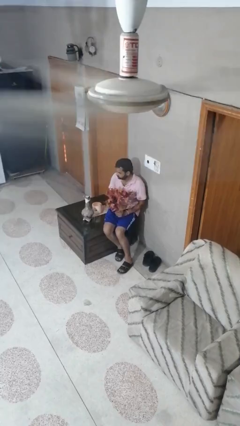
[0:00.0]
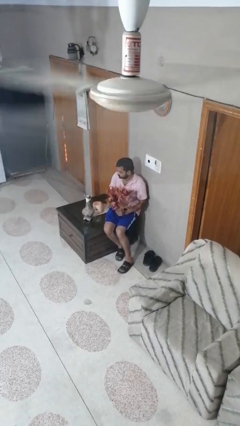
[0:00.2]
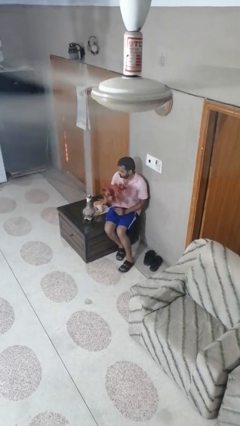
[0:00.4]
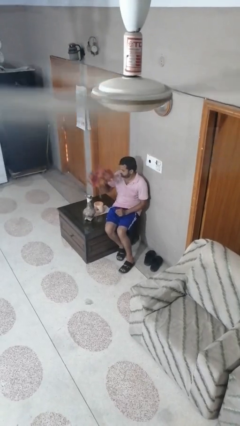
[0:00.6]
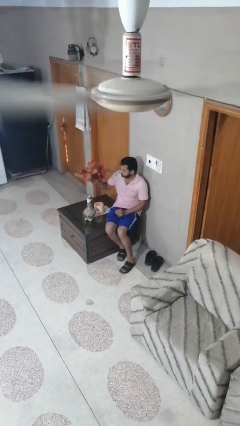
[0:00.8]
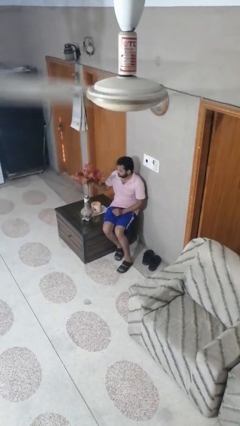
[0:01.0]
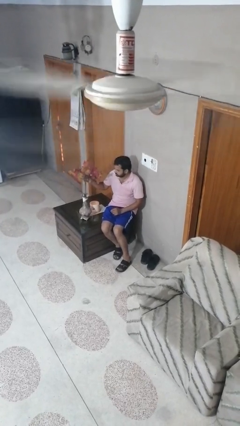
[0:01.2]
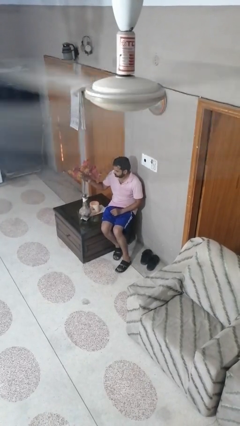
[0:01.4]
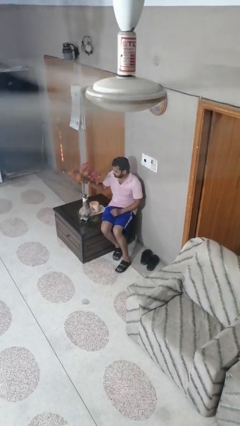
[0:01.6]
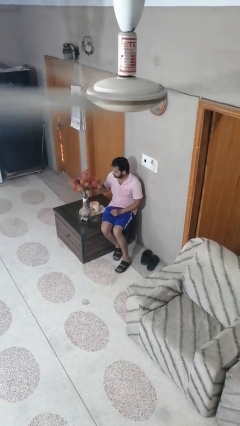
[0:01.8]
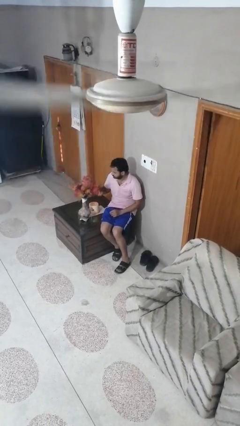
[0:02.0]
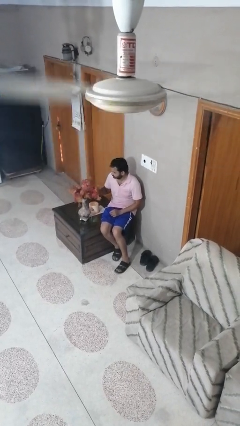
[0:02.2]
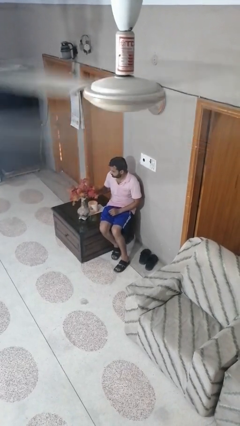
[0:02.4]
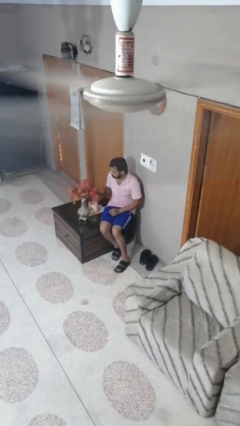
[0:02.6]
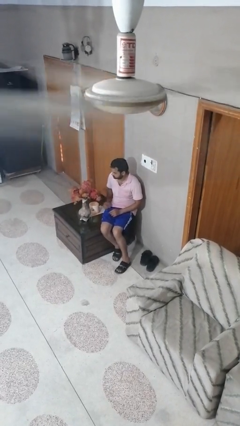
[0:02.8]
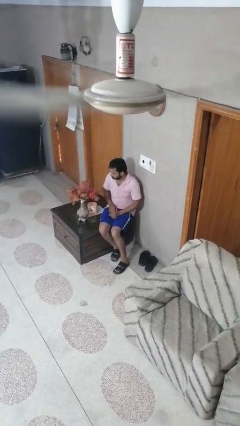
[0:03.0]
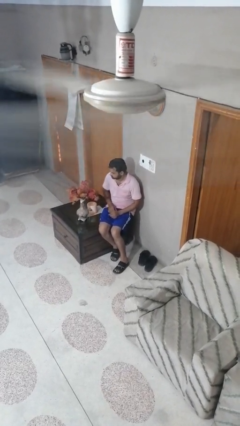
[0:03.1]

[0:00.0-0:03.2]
person arranges flowers in vase

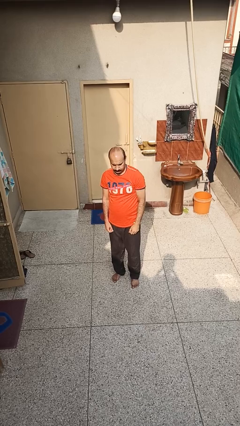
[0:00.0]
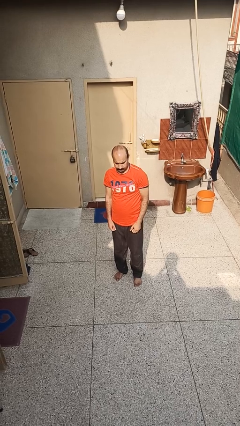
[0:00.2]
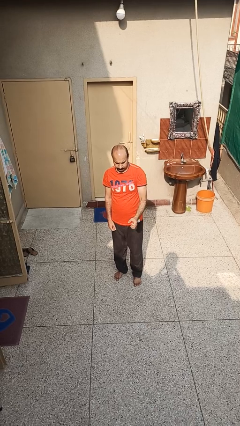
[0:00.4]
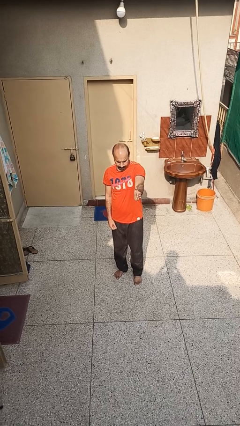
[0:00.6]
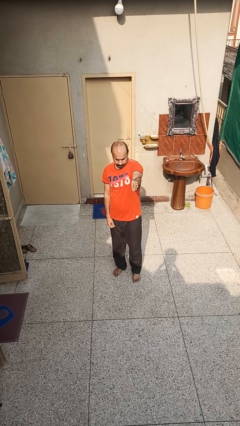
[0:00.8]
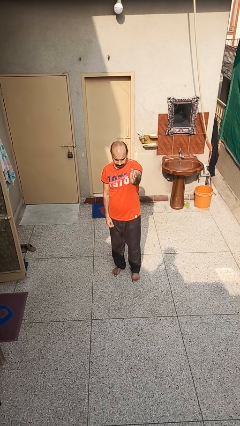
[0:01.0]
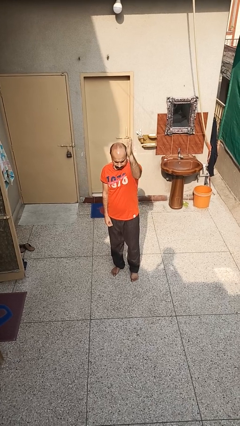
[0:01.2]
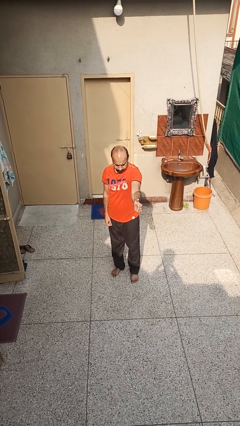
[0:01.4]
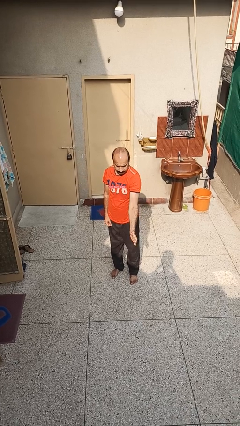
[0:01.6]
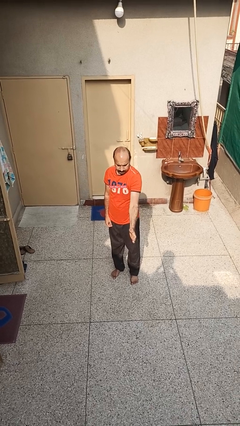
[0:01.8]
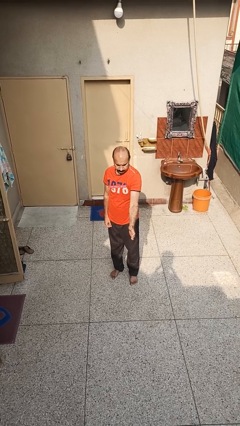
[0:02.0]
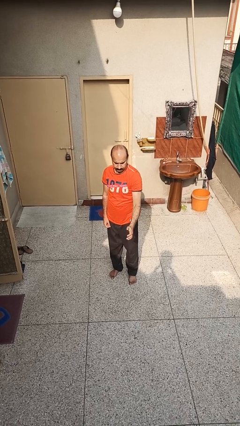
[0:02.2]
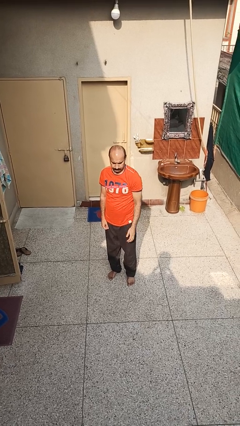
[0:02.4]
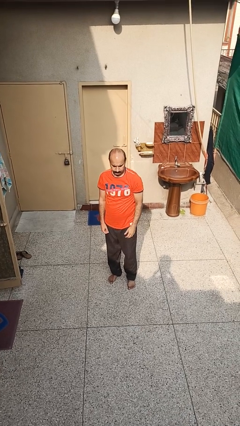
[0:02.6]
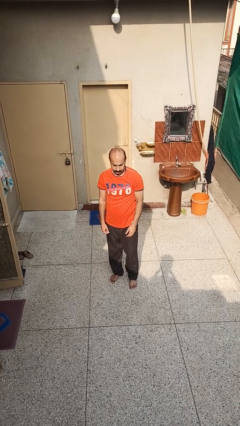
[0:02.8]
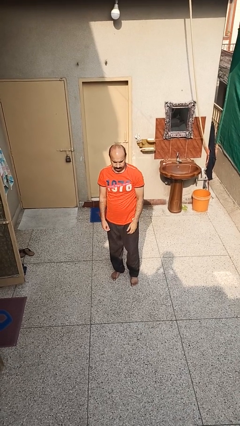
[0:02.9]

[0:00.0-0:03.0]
person karate chop

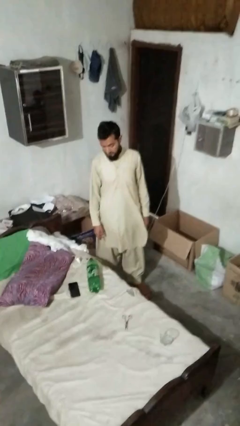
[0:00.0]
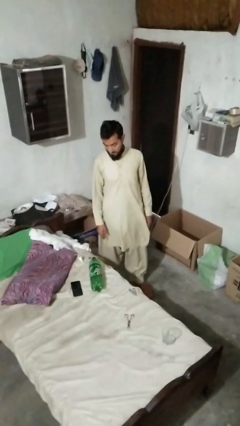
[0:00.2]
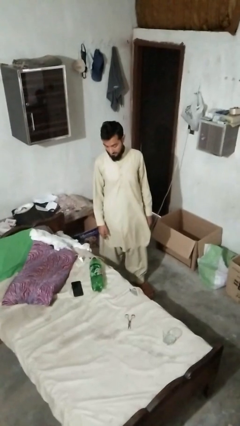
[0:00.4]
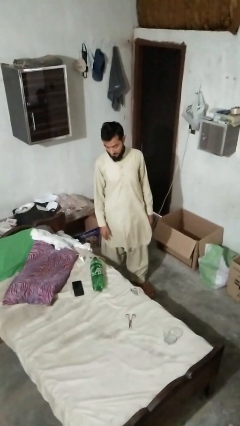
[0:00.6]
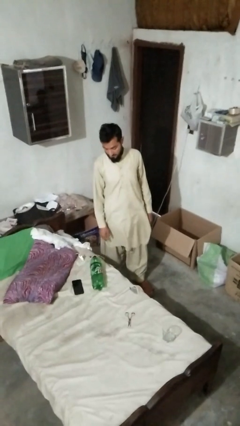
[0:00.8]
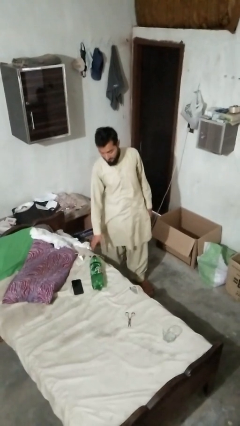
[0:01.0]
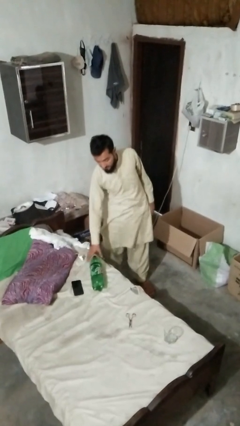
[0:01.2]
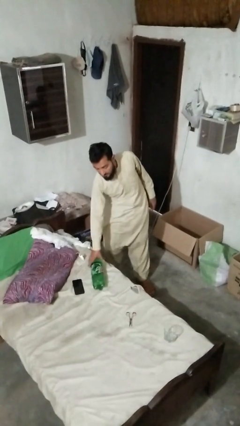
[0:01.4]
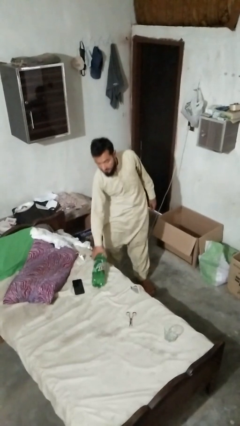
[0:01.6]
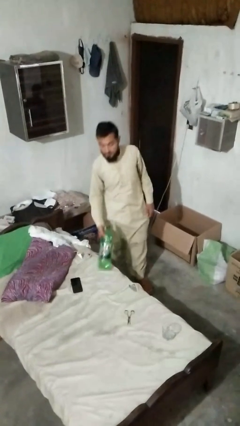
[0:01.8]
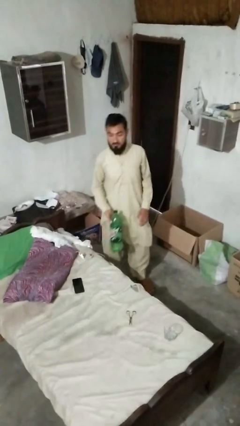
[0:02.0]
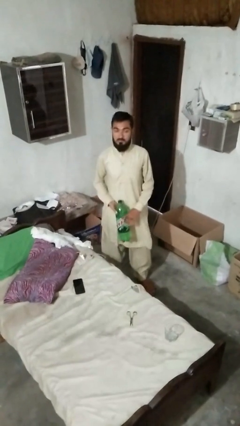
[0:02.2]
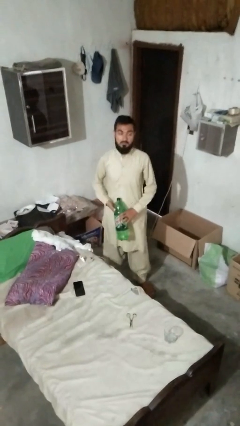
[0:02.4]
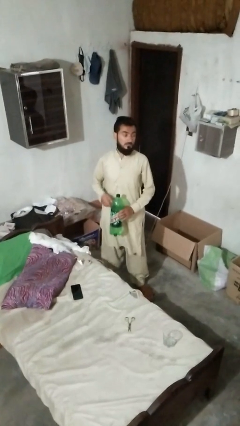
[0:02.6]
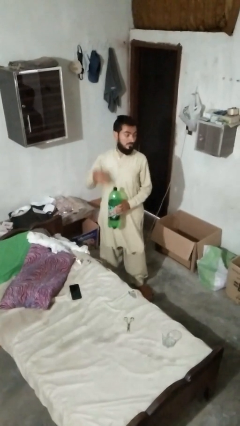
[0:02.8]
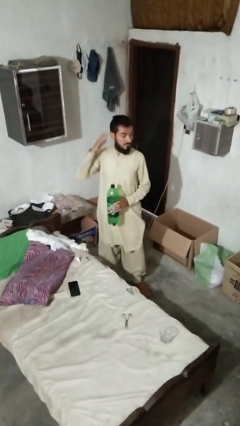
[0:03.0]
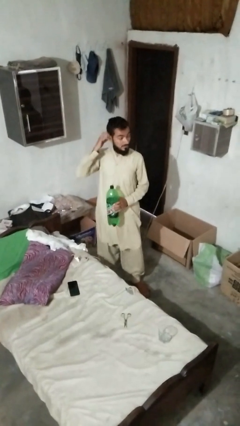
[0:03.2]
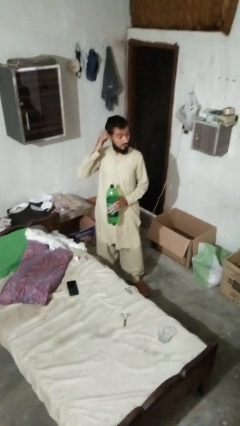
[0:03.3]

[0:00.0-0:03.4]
person picks up object from bed

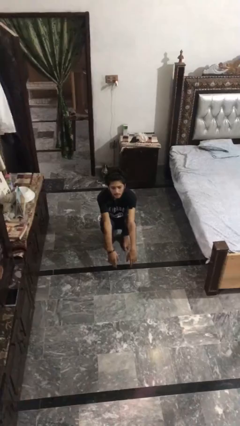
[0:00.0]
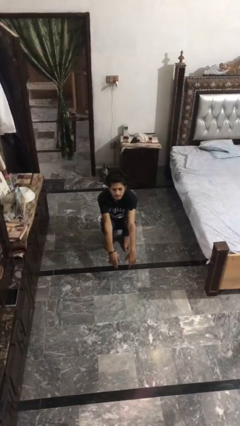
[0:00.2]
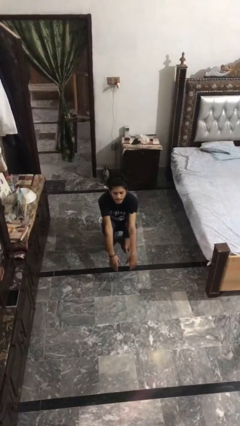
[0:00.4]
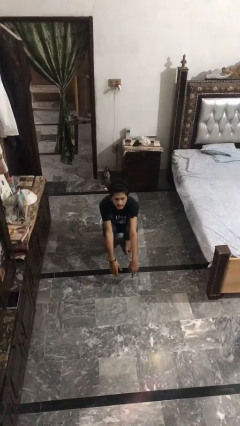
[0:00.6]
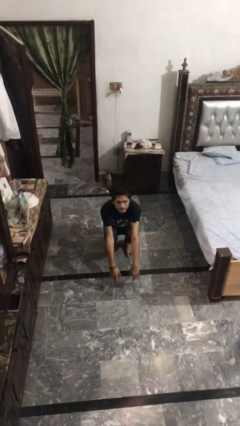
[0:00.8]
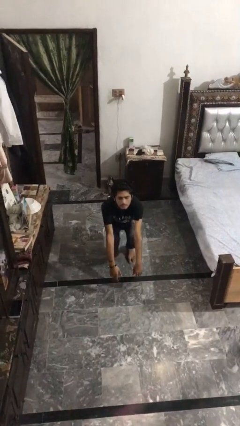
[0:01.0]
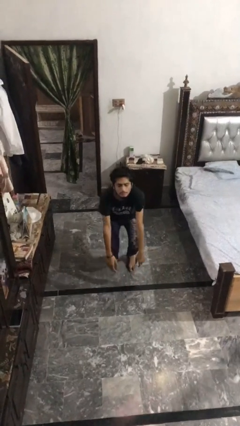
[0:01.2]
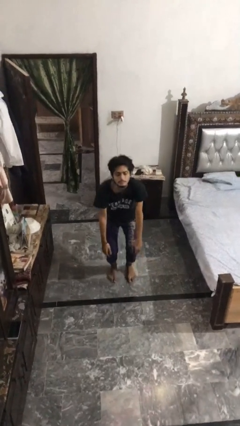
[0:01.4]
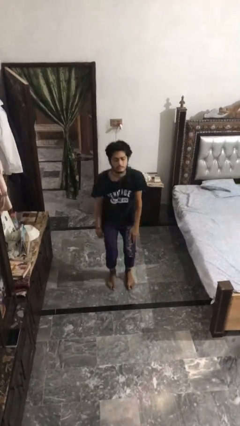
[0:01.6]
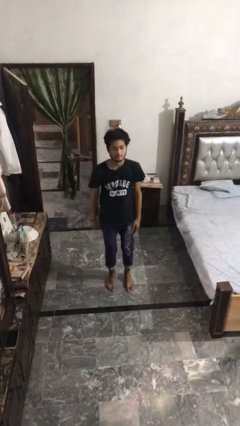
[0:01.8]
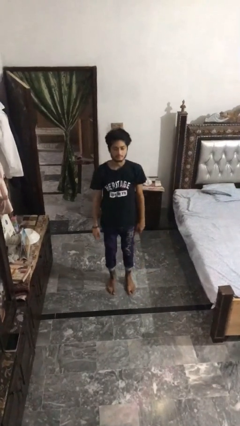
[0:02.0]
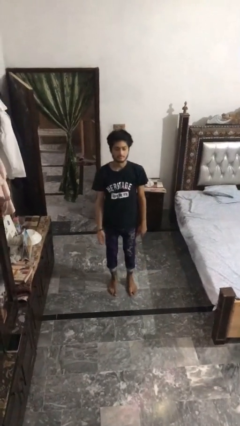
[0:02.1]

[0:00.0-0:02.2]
person stands up

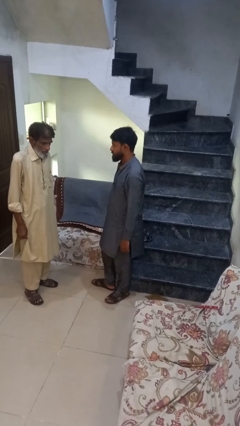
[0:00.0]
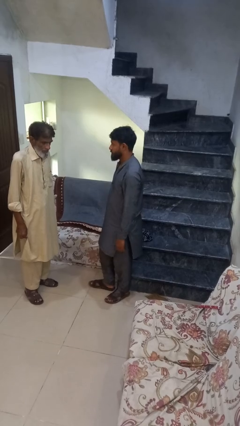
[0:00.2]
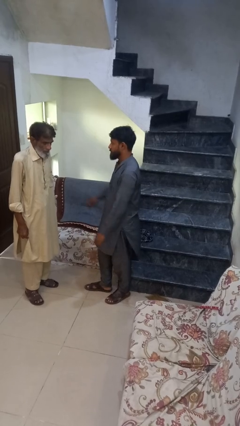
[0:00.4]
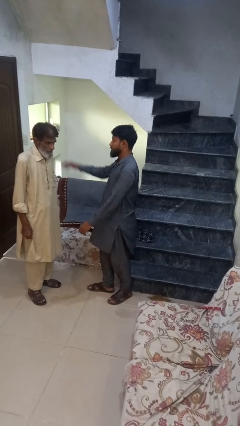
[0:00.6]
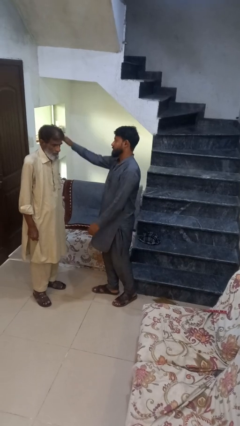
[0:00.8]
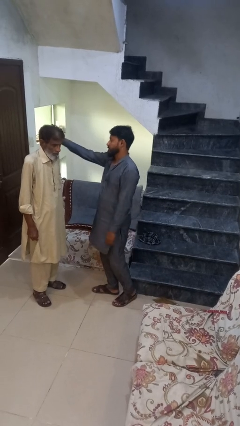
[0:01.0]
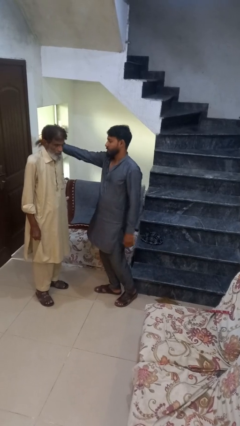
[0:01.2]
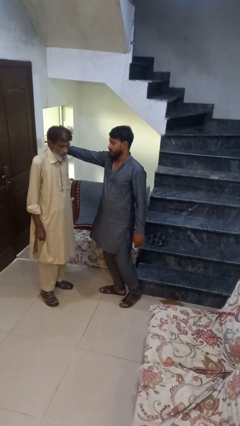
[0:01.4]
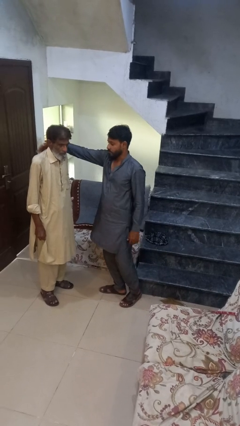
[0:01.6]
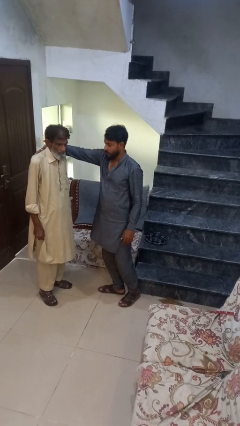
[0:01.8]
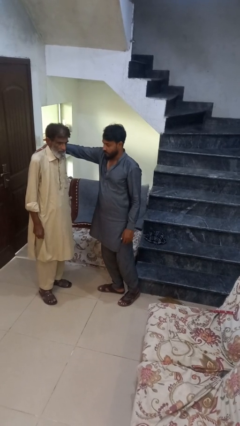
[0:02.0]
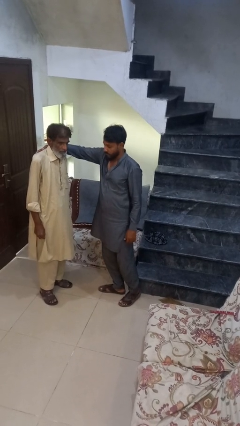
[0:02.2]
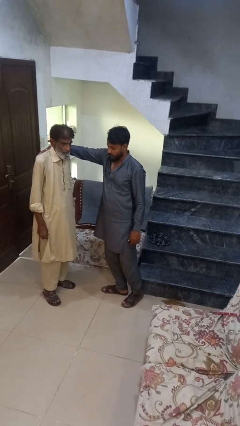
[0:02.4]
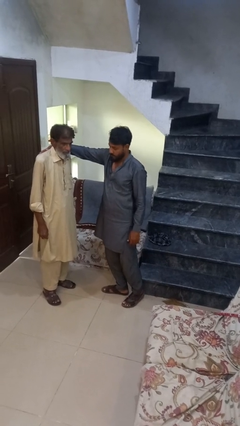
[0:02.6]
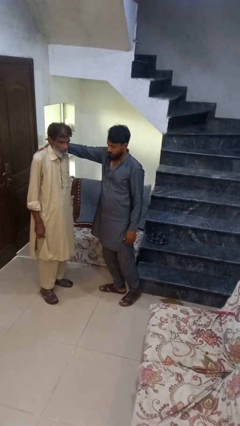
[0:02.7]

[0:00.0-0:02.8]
person pounds shoulders of person

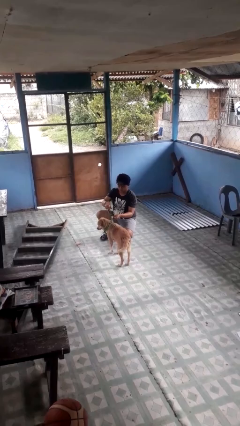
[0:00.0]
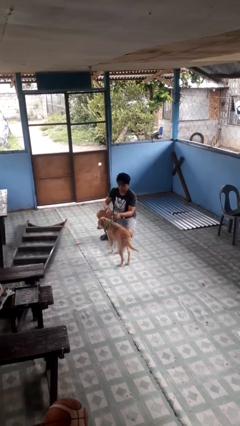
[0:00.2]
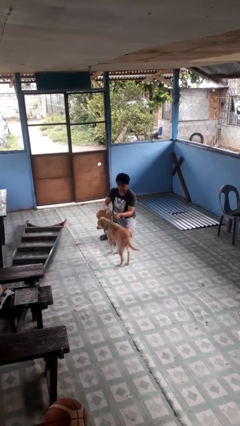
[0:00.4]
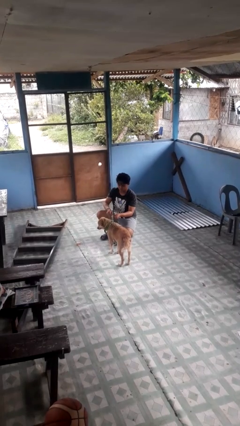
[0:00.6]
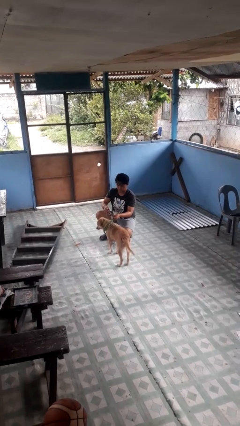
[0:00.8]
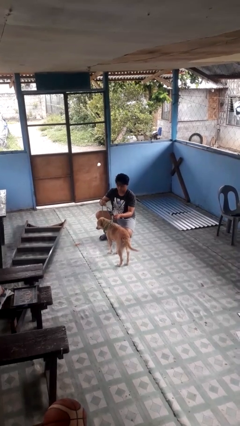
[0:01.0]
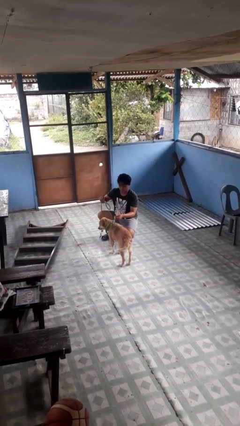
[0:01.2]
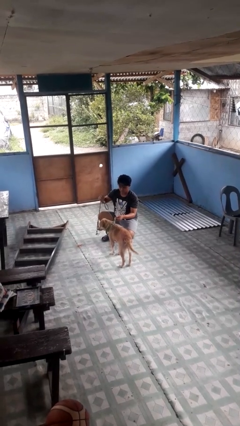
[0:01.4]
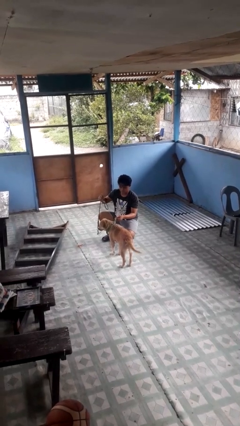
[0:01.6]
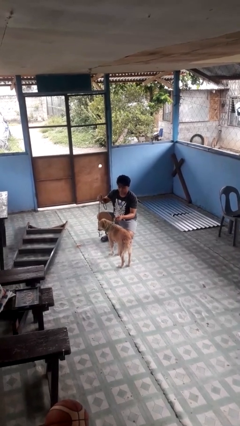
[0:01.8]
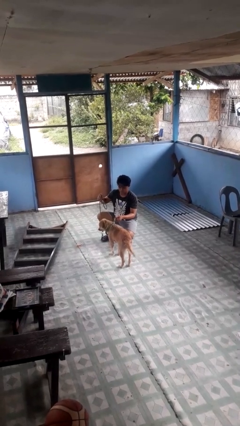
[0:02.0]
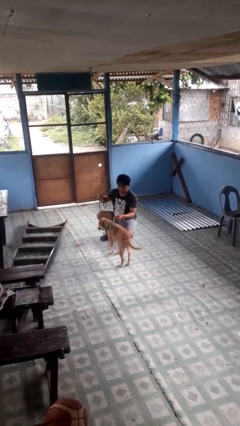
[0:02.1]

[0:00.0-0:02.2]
person unattaches leash from dog

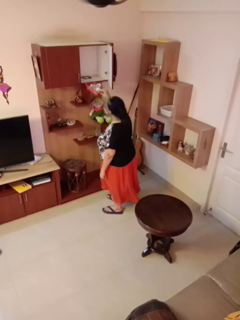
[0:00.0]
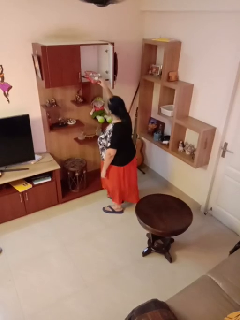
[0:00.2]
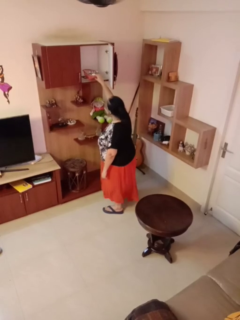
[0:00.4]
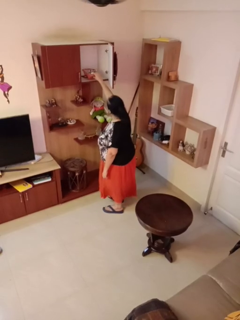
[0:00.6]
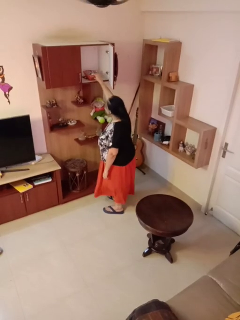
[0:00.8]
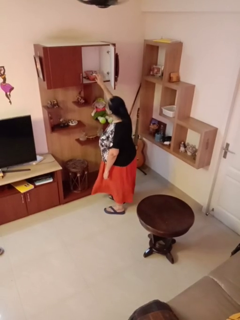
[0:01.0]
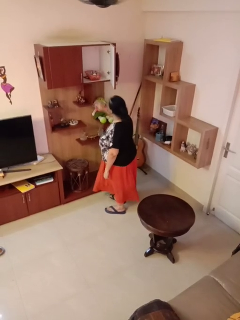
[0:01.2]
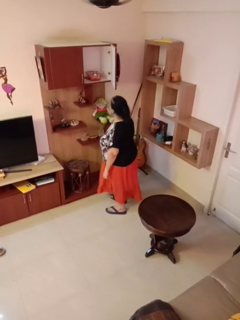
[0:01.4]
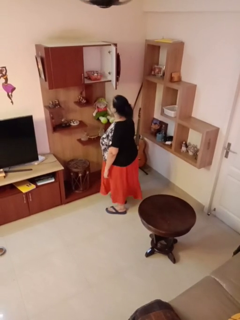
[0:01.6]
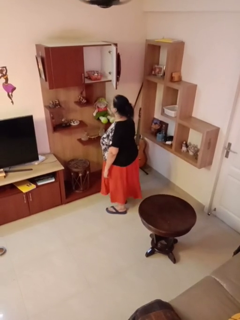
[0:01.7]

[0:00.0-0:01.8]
person puts down object into cabinet
